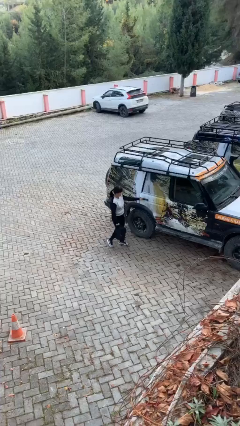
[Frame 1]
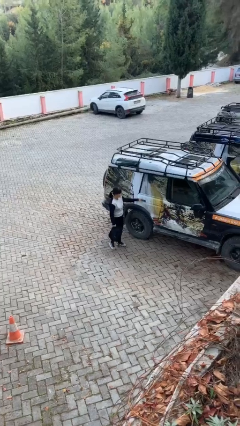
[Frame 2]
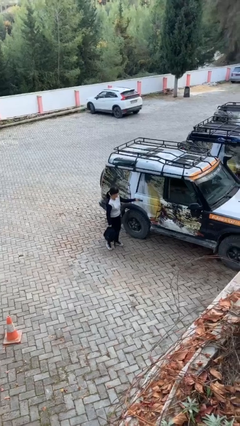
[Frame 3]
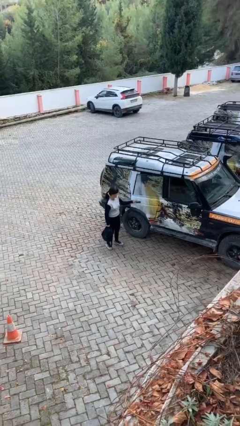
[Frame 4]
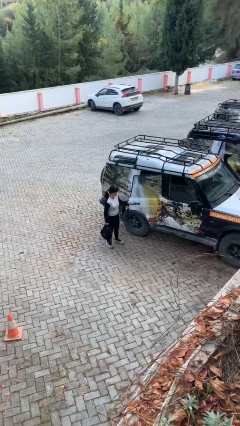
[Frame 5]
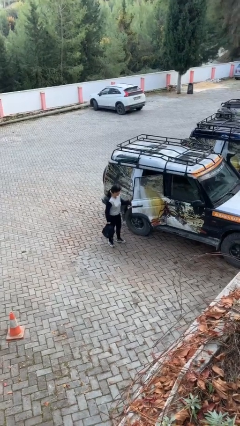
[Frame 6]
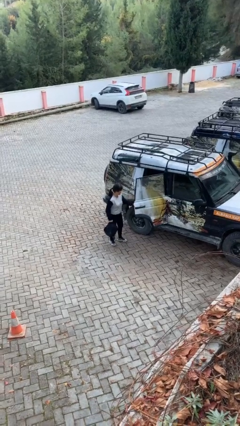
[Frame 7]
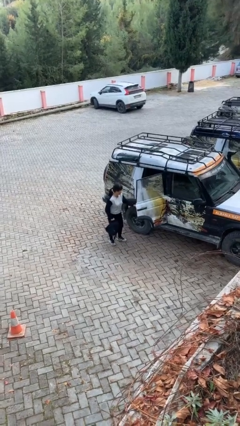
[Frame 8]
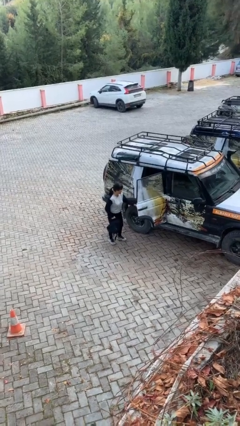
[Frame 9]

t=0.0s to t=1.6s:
person opens car door

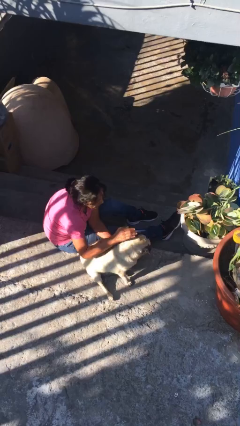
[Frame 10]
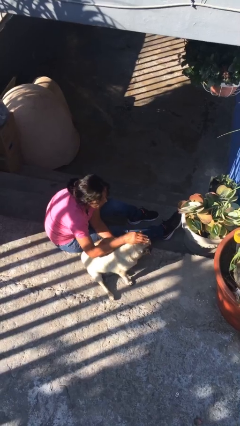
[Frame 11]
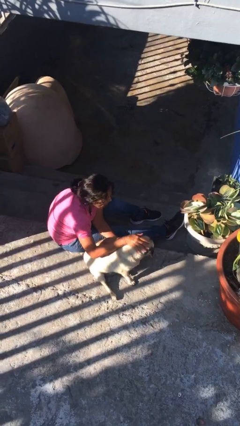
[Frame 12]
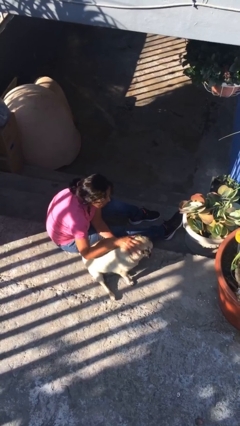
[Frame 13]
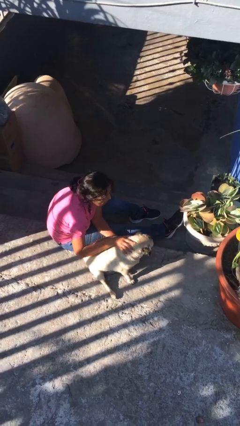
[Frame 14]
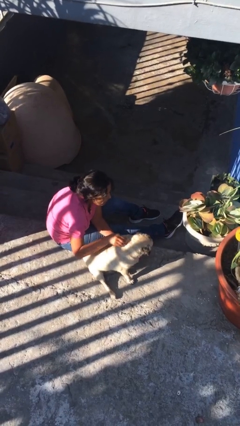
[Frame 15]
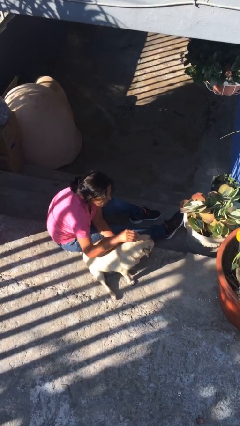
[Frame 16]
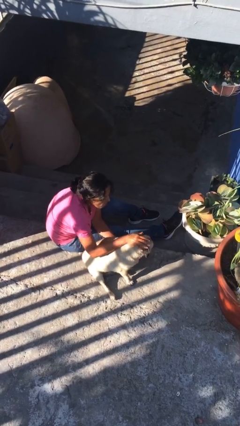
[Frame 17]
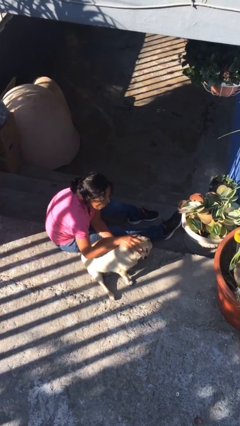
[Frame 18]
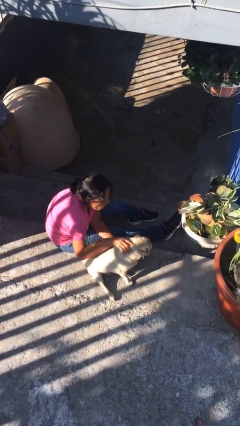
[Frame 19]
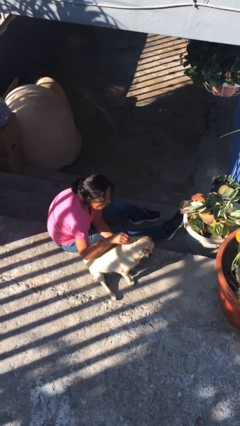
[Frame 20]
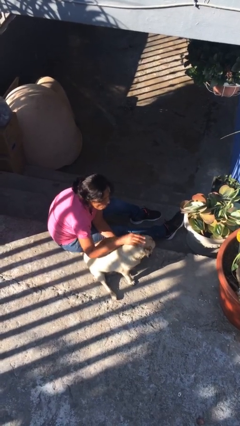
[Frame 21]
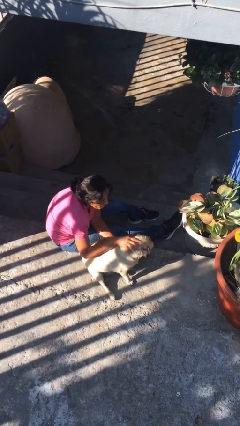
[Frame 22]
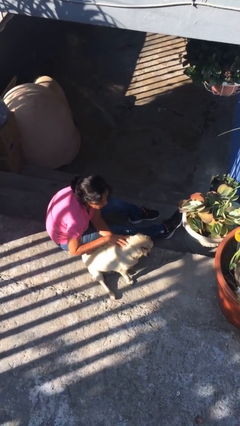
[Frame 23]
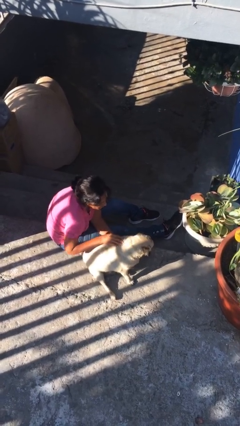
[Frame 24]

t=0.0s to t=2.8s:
person pets dog

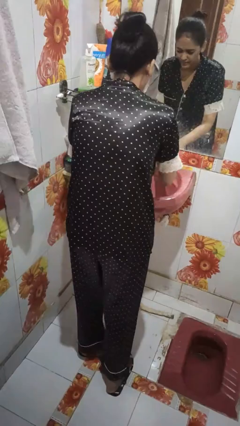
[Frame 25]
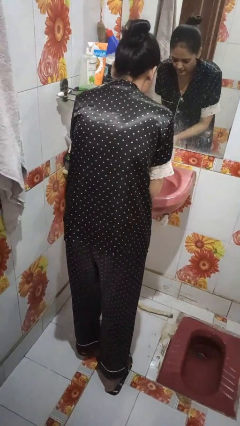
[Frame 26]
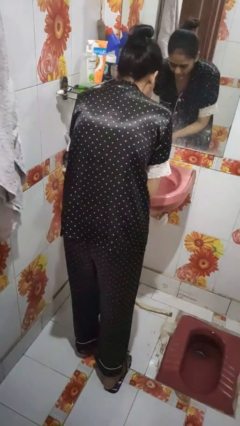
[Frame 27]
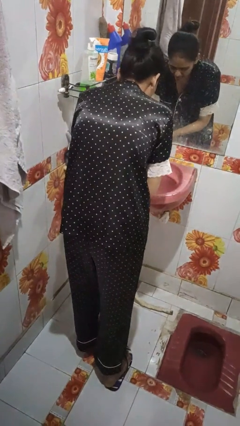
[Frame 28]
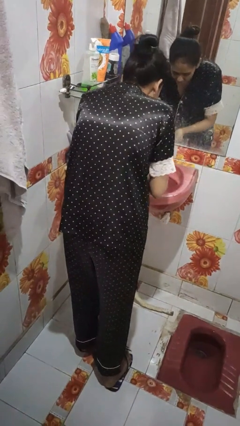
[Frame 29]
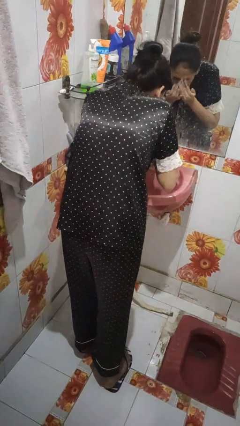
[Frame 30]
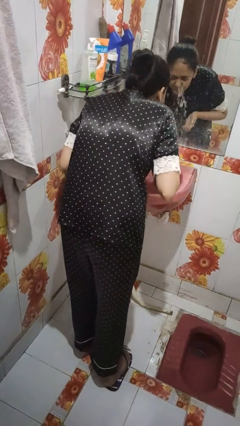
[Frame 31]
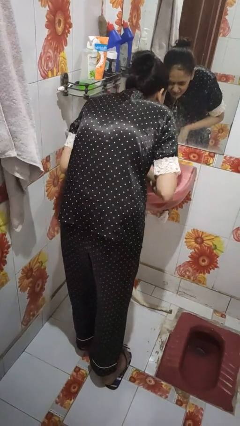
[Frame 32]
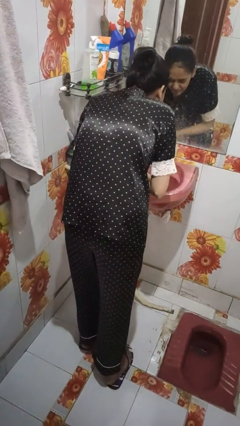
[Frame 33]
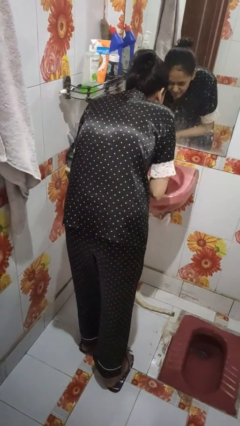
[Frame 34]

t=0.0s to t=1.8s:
person washes face

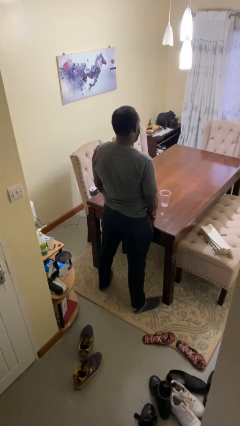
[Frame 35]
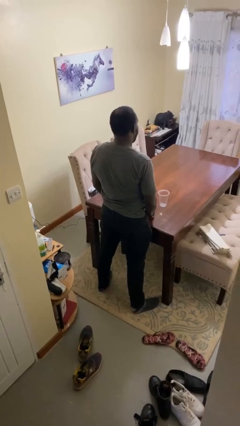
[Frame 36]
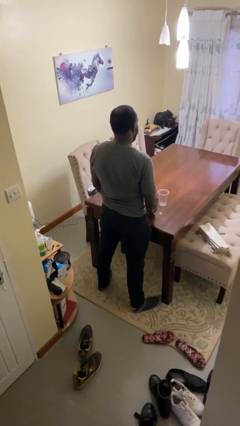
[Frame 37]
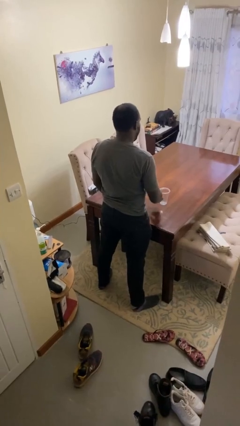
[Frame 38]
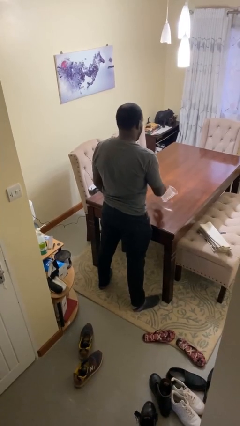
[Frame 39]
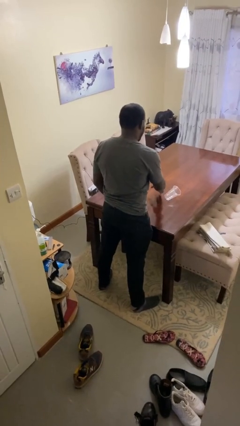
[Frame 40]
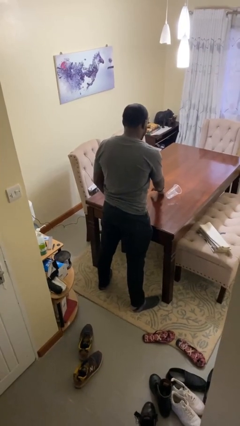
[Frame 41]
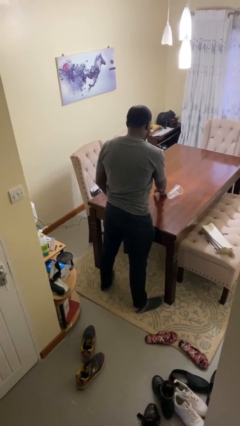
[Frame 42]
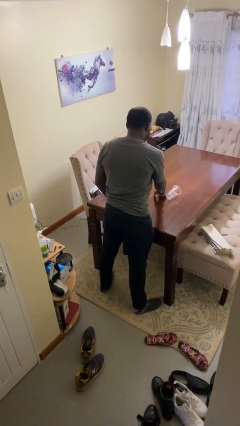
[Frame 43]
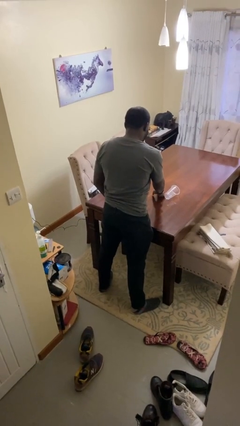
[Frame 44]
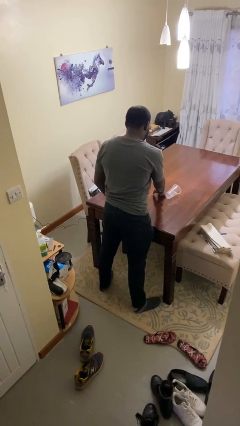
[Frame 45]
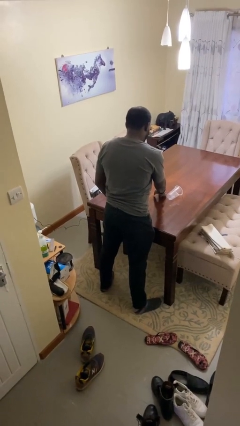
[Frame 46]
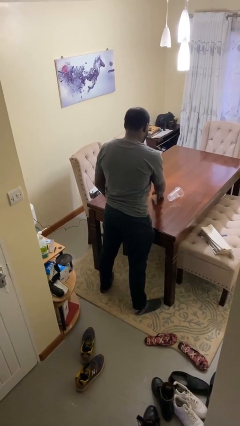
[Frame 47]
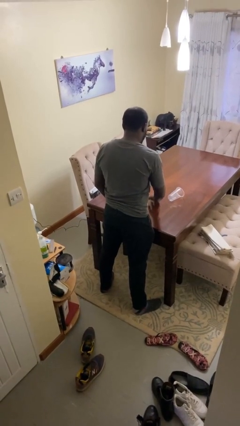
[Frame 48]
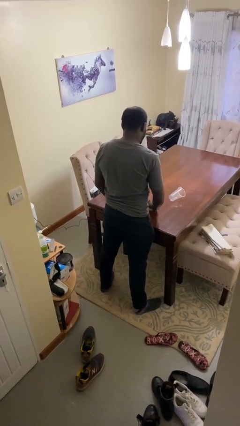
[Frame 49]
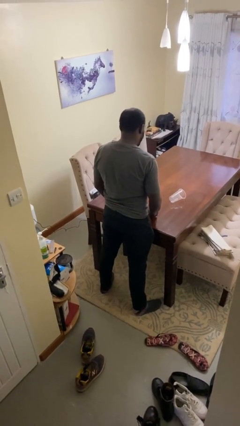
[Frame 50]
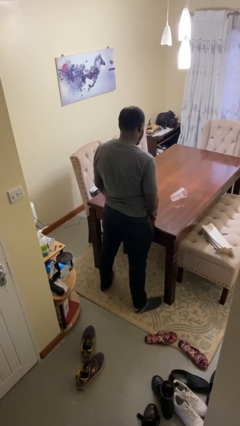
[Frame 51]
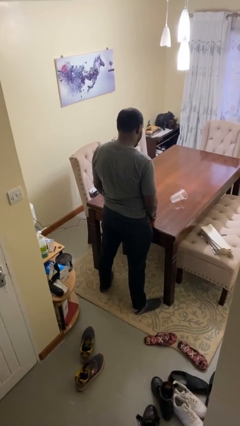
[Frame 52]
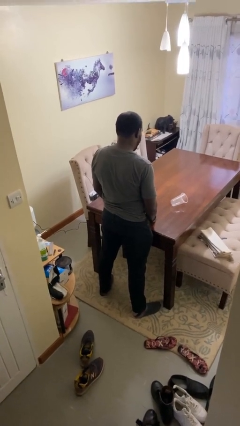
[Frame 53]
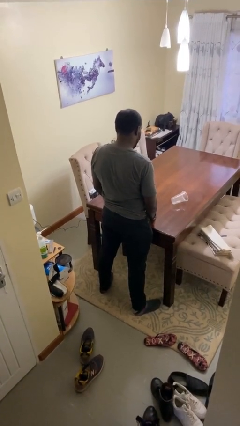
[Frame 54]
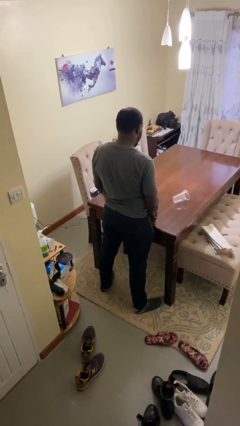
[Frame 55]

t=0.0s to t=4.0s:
person knocks over glass

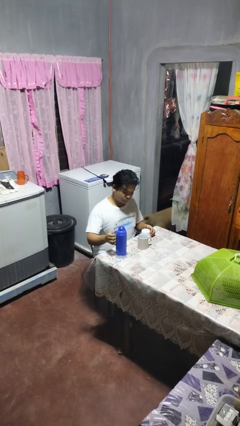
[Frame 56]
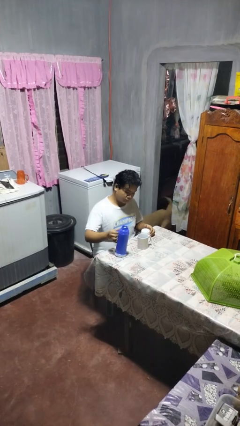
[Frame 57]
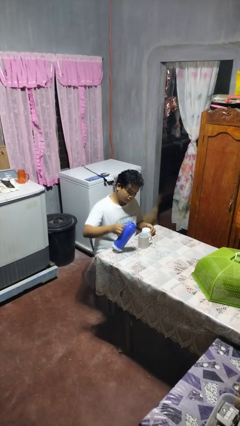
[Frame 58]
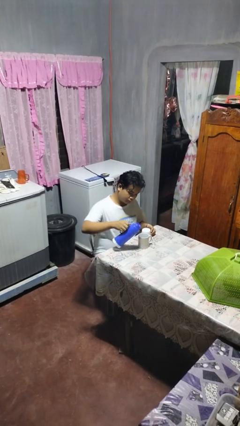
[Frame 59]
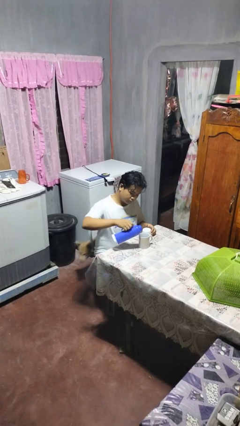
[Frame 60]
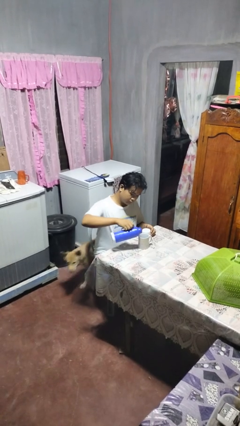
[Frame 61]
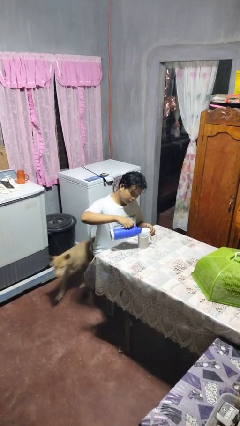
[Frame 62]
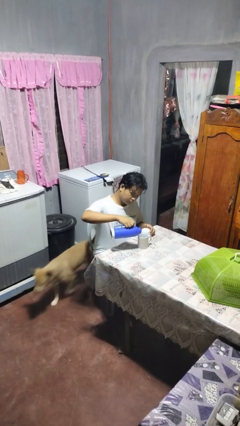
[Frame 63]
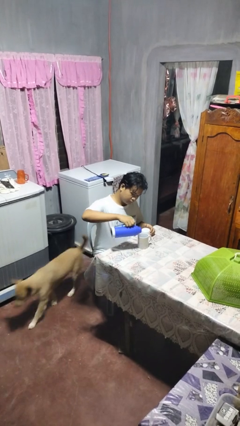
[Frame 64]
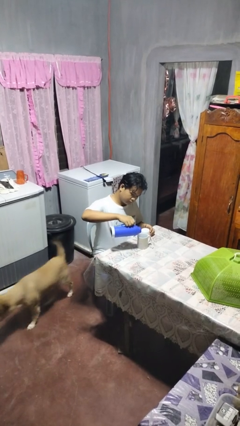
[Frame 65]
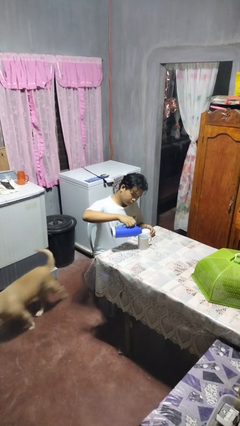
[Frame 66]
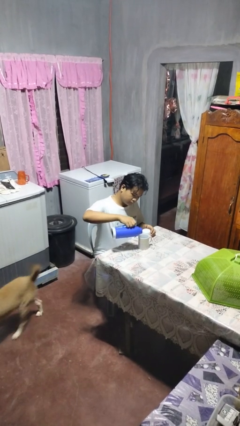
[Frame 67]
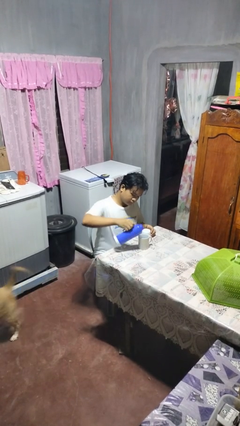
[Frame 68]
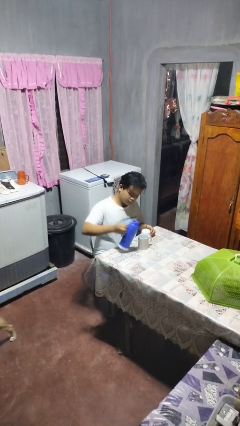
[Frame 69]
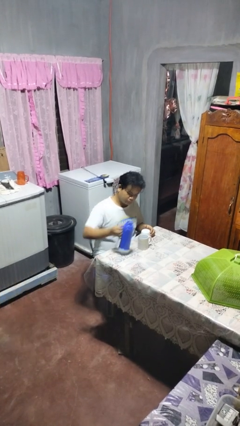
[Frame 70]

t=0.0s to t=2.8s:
person pours coffee into mug

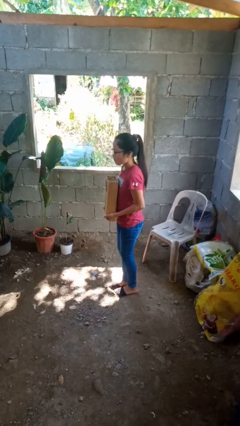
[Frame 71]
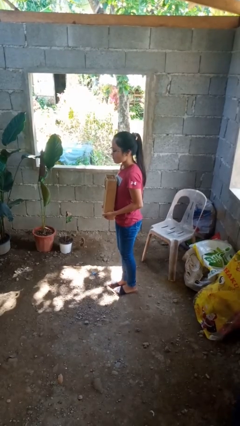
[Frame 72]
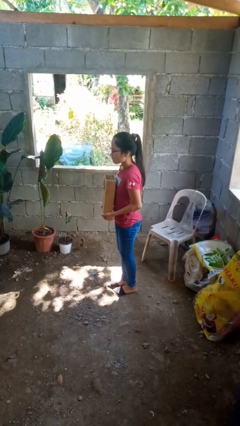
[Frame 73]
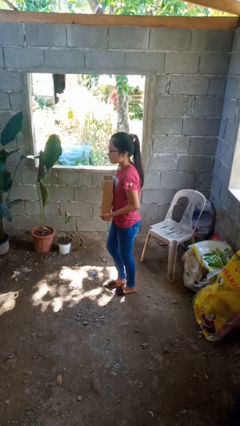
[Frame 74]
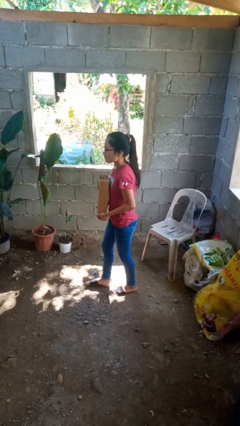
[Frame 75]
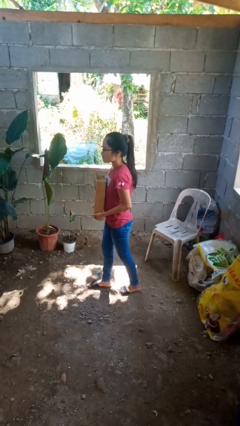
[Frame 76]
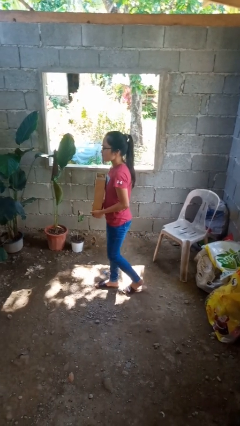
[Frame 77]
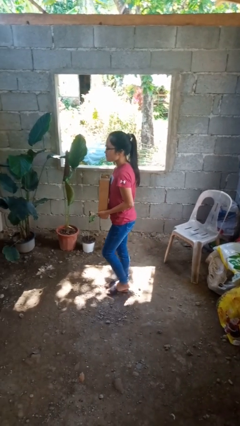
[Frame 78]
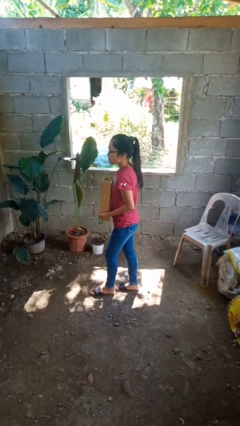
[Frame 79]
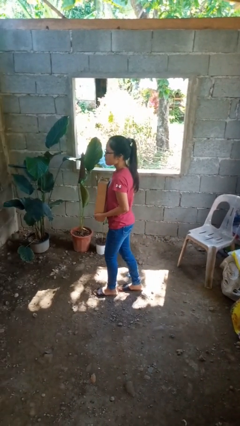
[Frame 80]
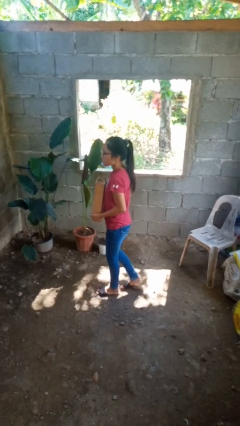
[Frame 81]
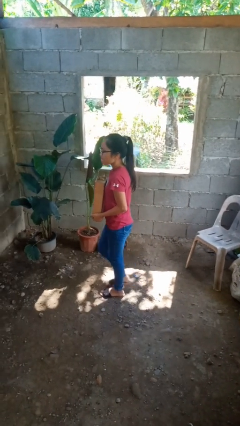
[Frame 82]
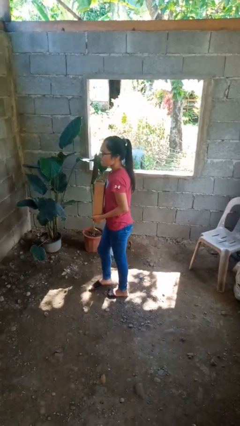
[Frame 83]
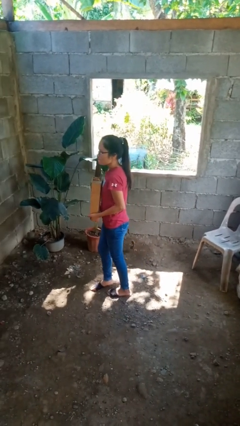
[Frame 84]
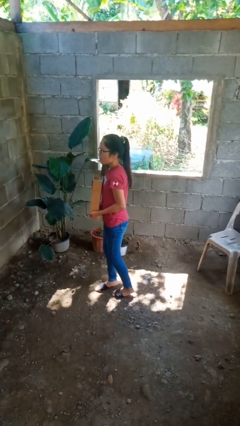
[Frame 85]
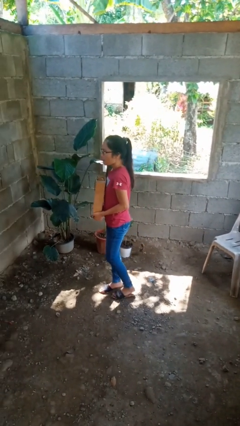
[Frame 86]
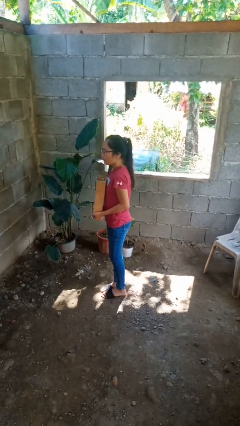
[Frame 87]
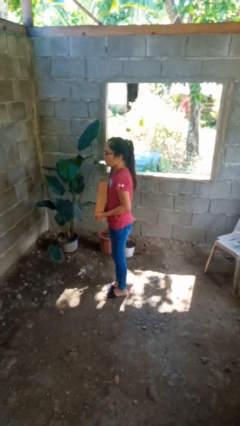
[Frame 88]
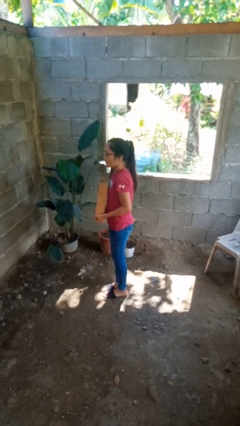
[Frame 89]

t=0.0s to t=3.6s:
person carries groceries

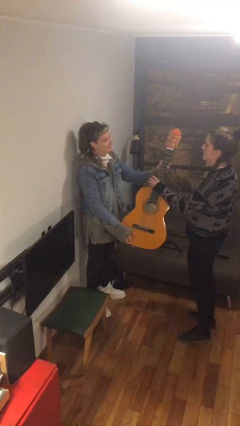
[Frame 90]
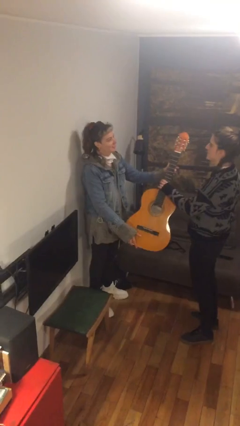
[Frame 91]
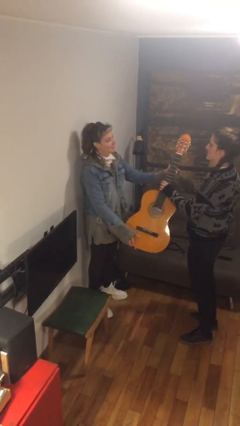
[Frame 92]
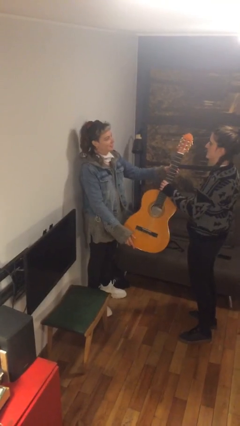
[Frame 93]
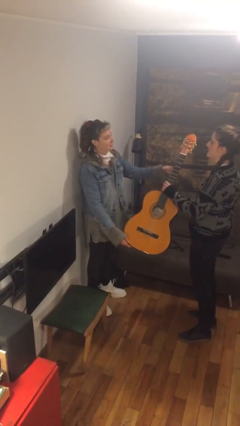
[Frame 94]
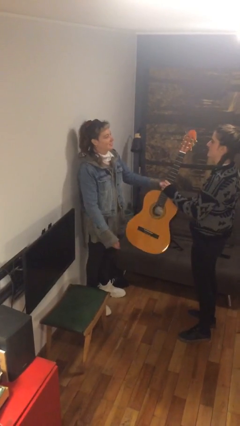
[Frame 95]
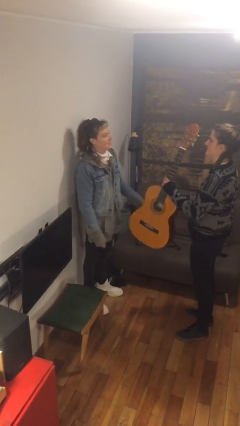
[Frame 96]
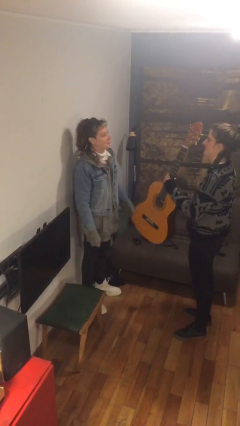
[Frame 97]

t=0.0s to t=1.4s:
person transfers object to person
